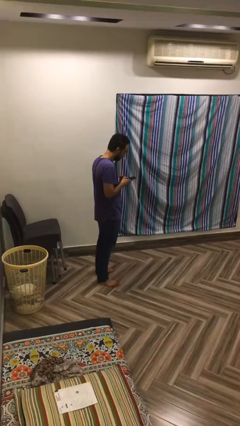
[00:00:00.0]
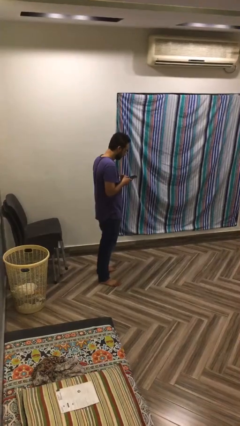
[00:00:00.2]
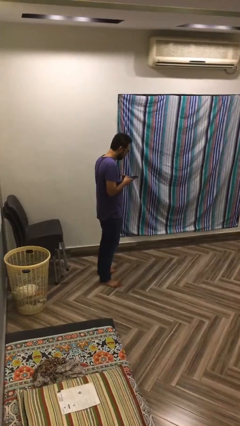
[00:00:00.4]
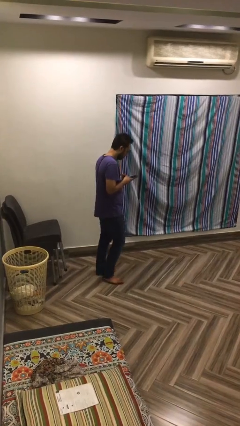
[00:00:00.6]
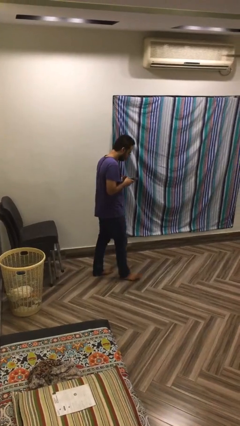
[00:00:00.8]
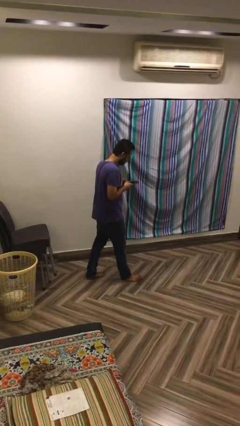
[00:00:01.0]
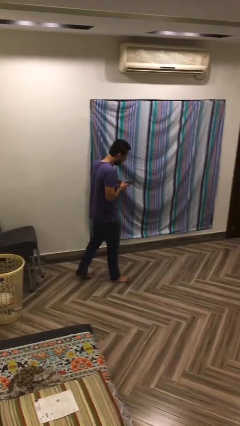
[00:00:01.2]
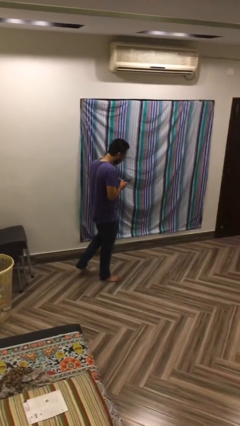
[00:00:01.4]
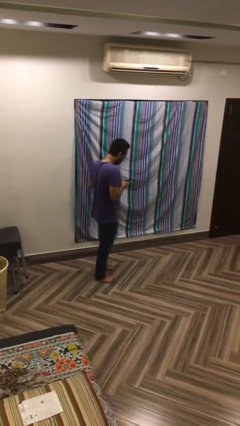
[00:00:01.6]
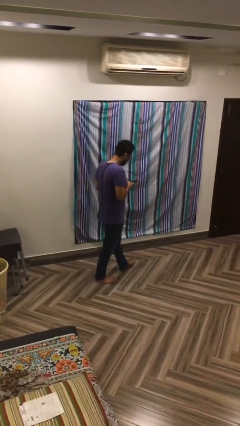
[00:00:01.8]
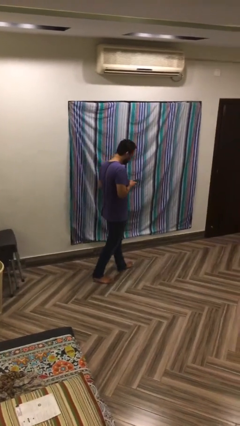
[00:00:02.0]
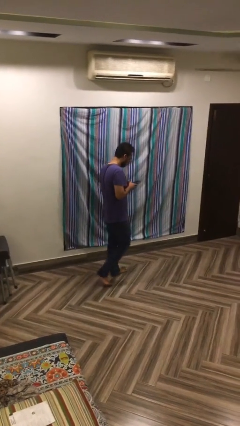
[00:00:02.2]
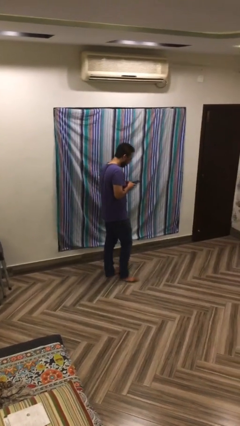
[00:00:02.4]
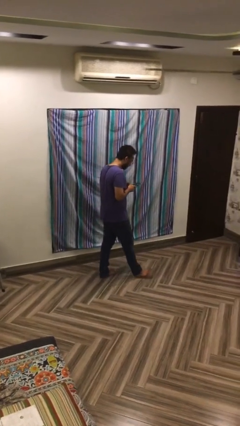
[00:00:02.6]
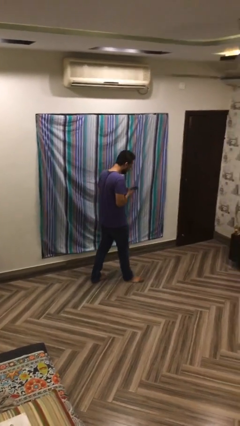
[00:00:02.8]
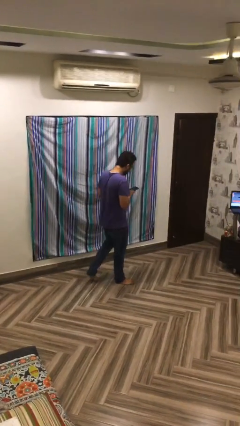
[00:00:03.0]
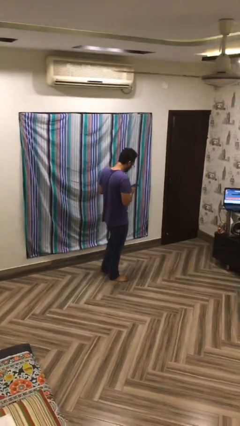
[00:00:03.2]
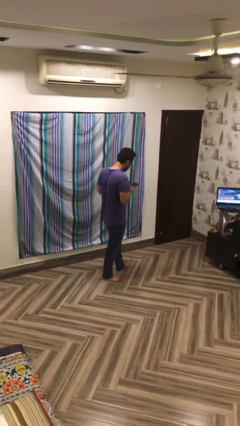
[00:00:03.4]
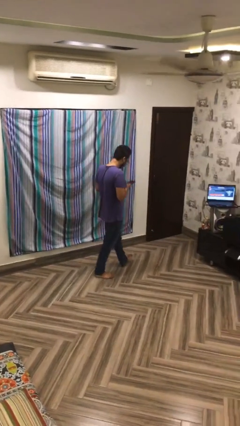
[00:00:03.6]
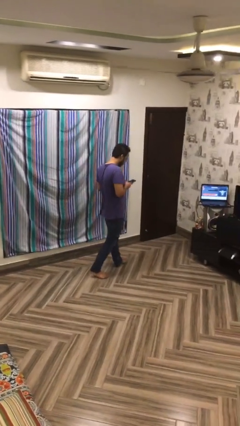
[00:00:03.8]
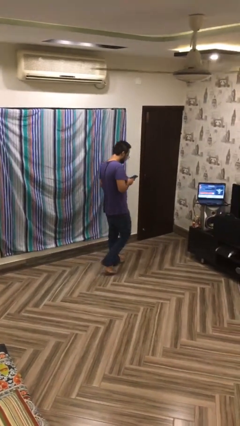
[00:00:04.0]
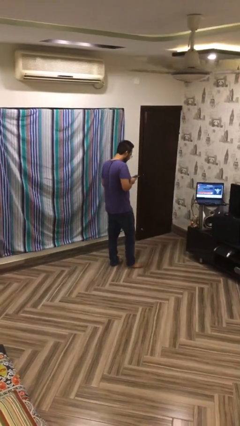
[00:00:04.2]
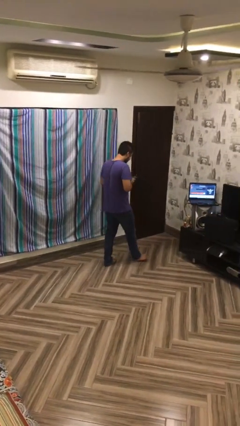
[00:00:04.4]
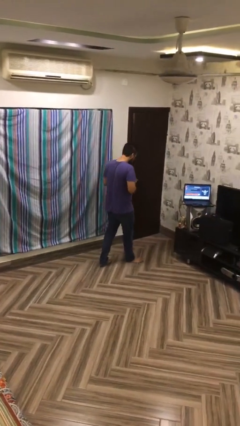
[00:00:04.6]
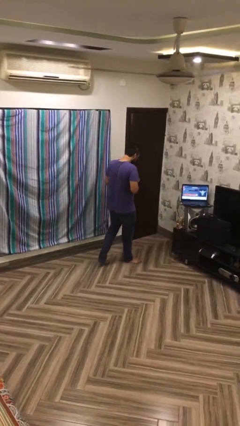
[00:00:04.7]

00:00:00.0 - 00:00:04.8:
person texts on phone

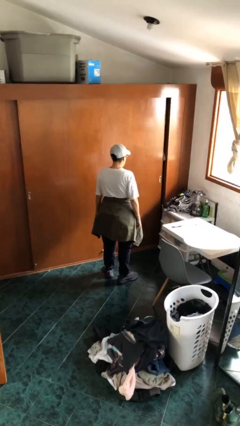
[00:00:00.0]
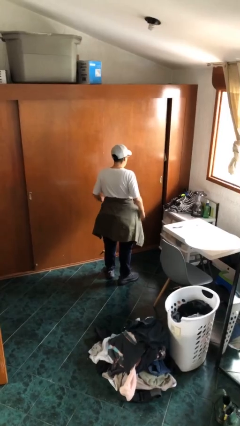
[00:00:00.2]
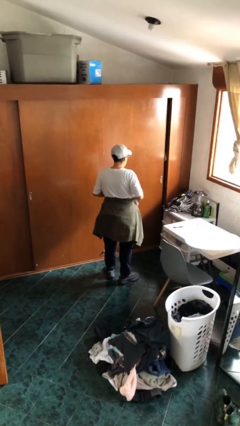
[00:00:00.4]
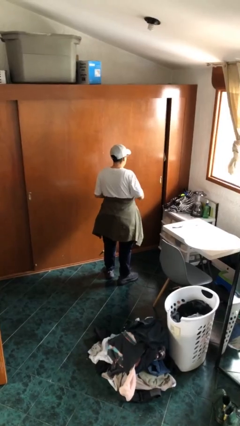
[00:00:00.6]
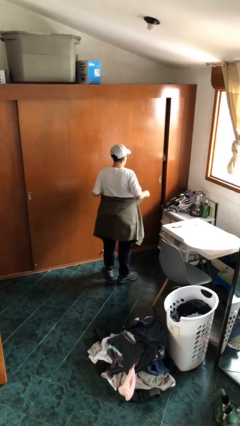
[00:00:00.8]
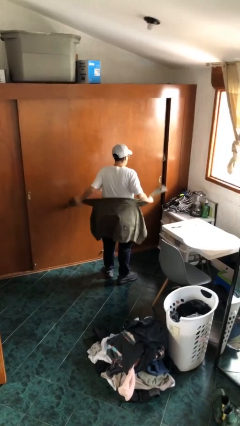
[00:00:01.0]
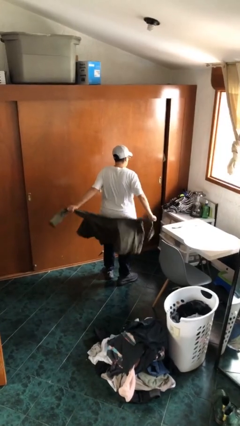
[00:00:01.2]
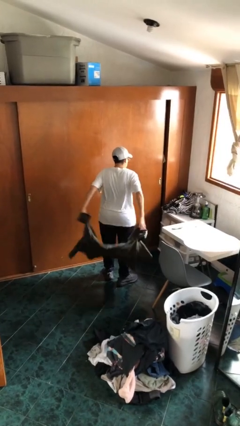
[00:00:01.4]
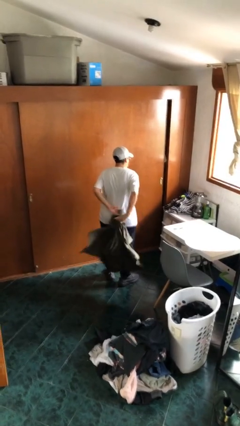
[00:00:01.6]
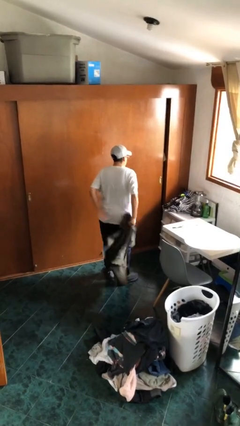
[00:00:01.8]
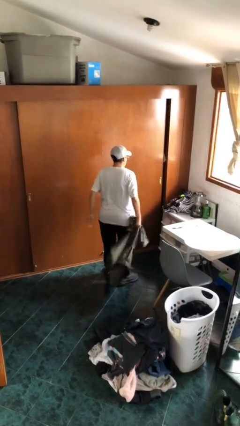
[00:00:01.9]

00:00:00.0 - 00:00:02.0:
person unties jacket around waist

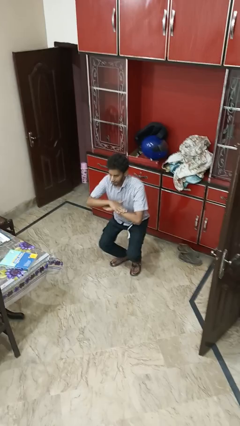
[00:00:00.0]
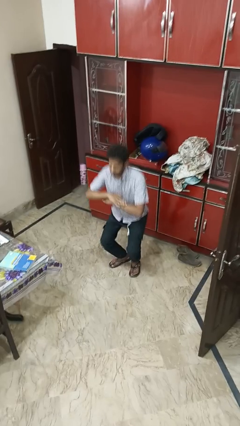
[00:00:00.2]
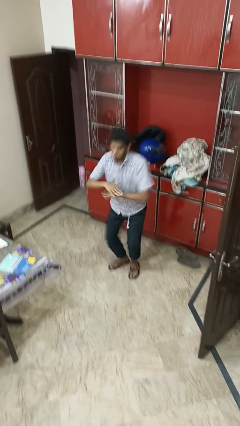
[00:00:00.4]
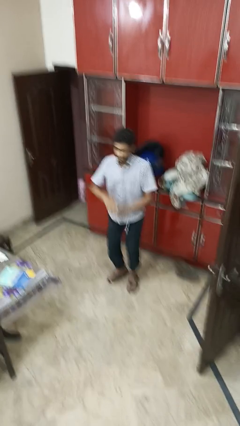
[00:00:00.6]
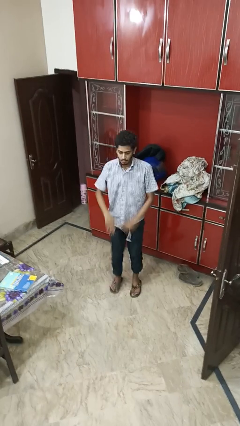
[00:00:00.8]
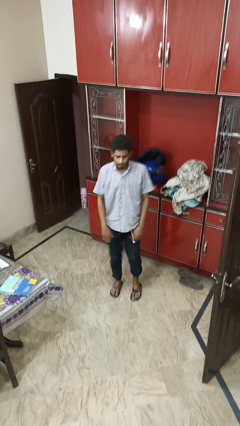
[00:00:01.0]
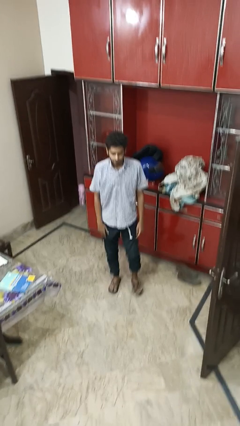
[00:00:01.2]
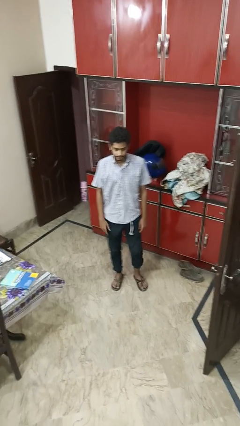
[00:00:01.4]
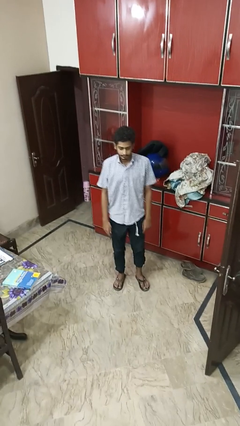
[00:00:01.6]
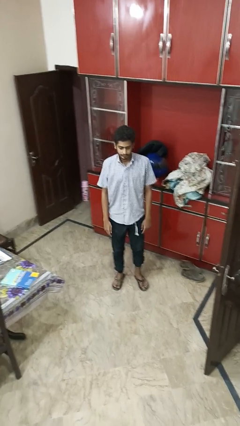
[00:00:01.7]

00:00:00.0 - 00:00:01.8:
person stands up

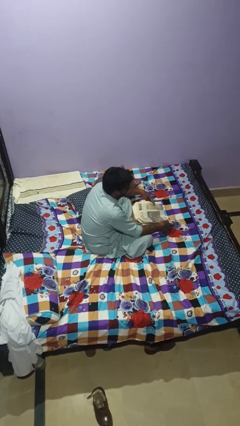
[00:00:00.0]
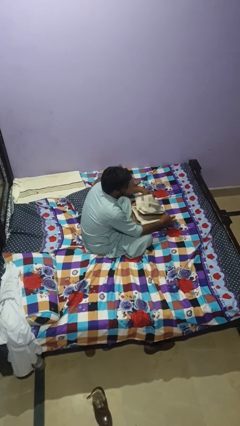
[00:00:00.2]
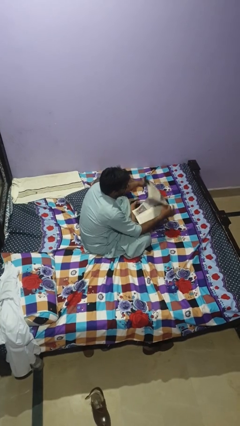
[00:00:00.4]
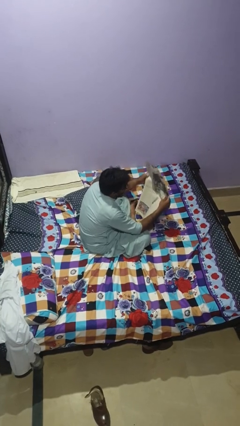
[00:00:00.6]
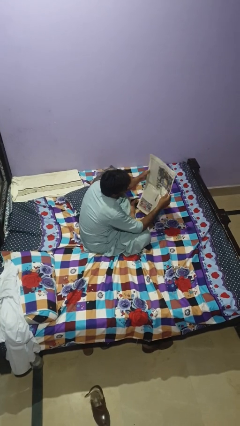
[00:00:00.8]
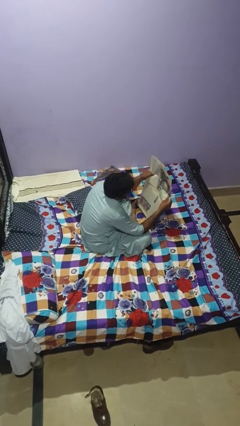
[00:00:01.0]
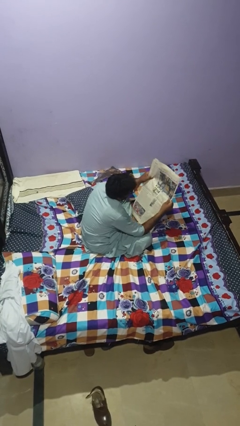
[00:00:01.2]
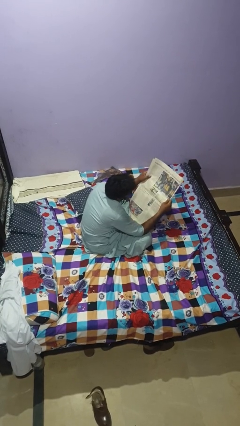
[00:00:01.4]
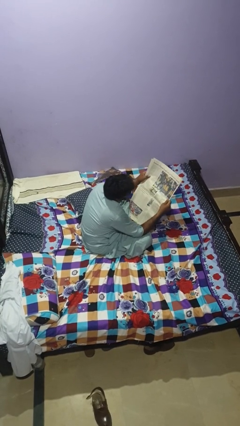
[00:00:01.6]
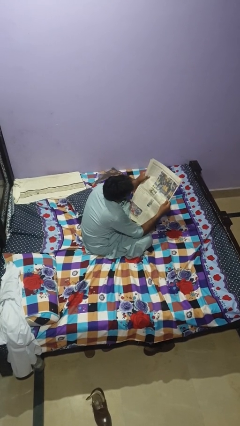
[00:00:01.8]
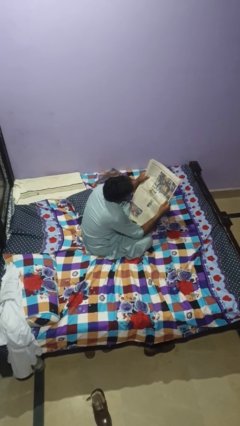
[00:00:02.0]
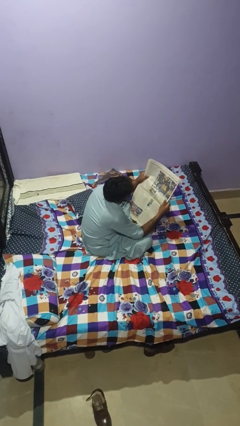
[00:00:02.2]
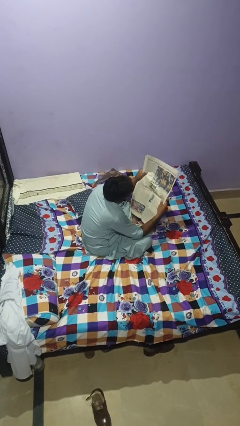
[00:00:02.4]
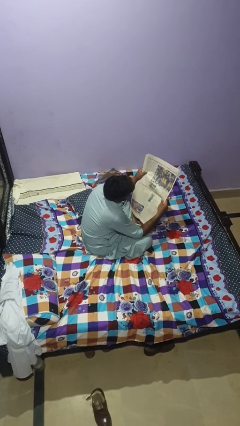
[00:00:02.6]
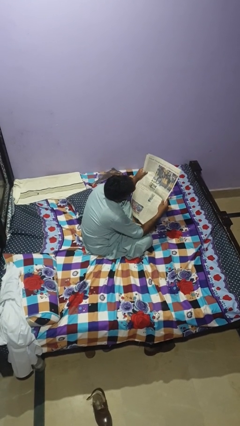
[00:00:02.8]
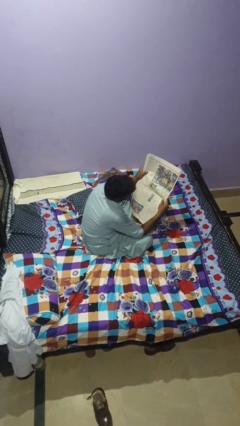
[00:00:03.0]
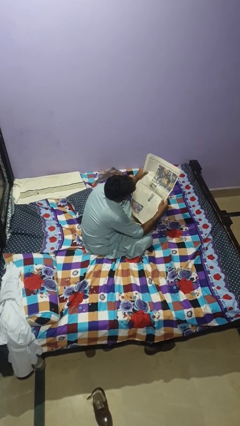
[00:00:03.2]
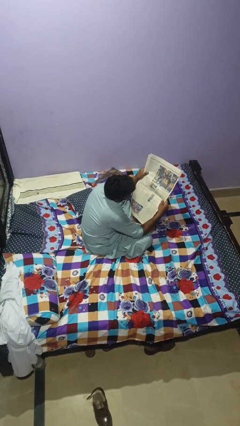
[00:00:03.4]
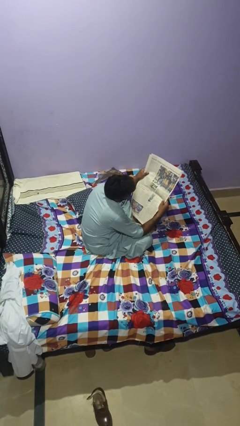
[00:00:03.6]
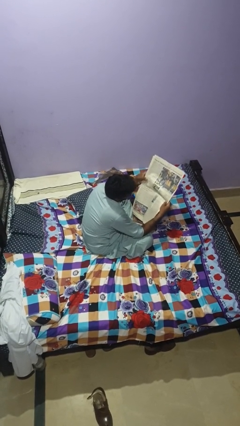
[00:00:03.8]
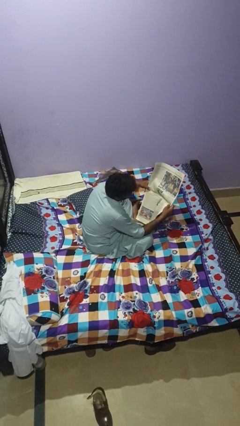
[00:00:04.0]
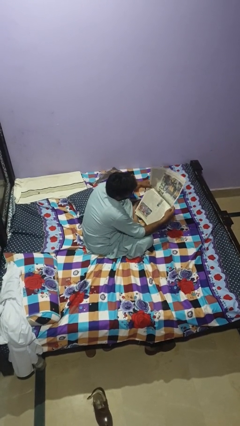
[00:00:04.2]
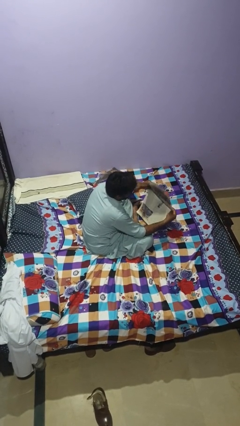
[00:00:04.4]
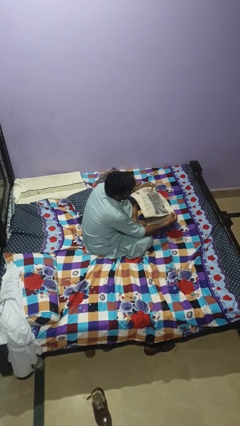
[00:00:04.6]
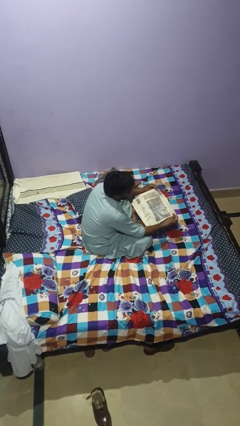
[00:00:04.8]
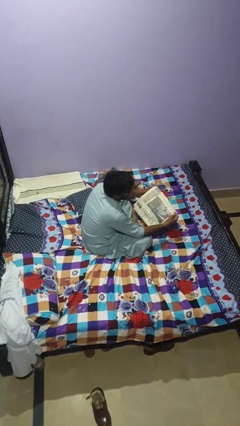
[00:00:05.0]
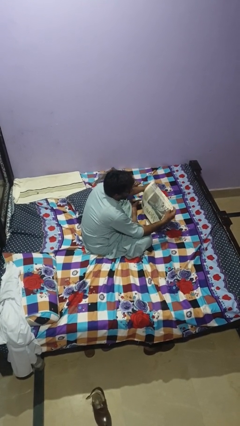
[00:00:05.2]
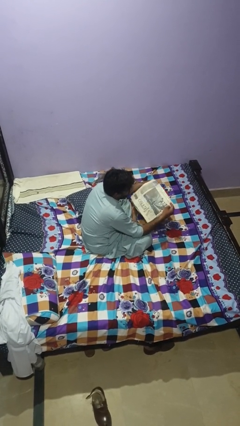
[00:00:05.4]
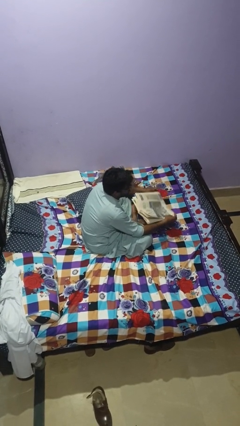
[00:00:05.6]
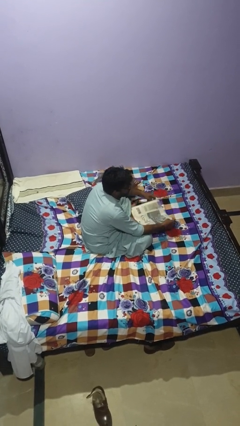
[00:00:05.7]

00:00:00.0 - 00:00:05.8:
person reads newspaper

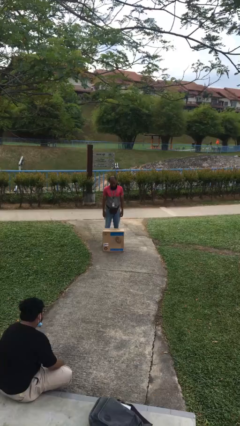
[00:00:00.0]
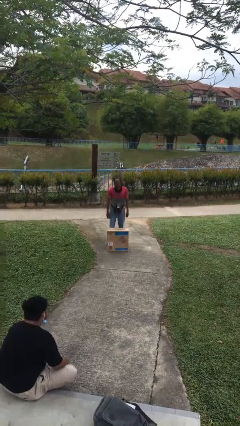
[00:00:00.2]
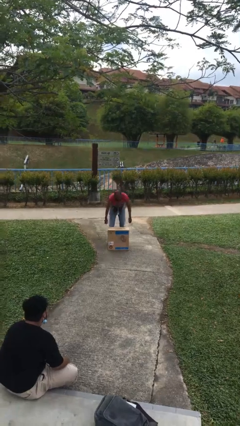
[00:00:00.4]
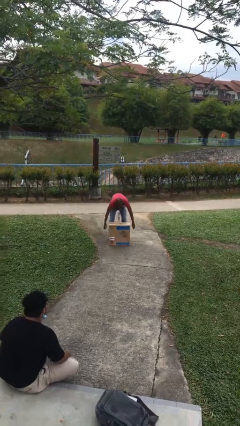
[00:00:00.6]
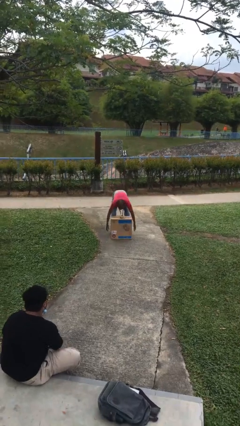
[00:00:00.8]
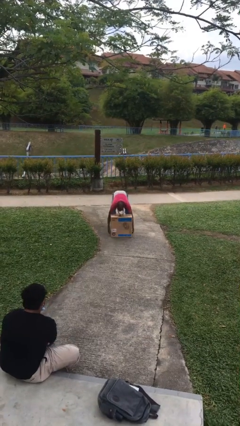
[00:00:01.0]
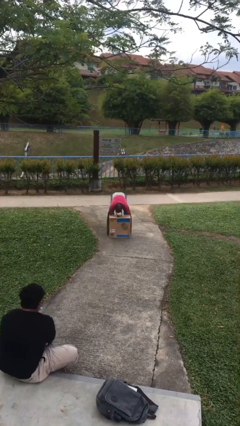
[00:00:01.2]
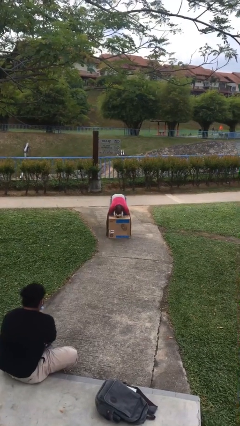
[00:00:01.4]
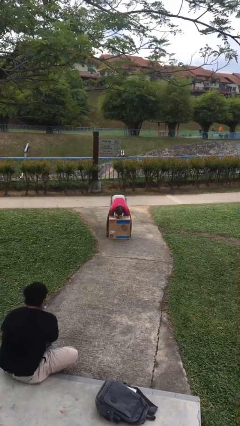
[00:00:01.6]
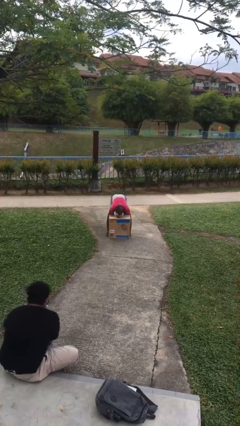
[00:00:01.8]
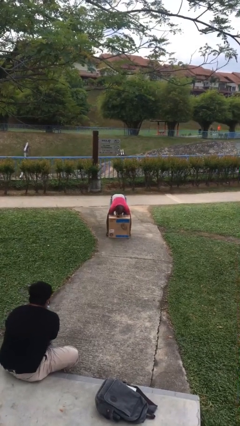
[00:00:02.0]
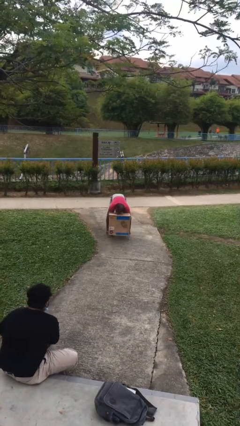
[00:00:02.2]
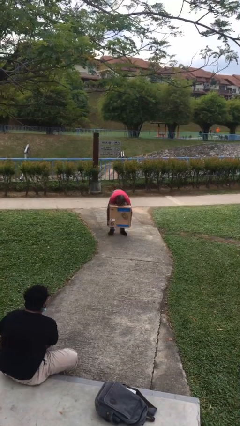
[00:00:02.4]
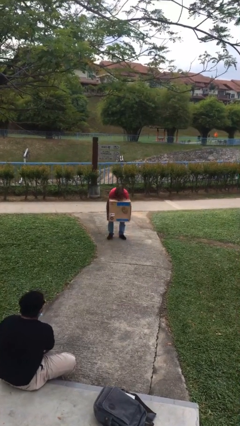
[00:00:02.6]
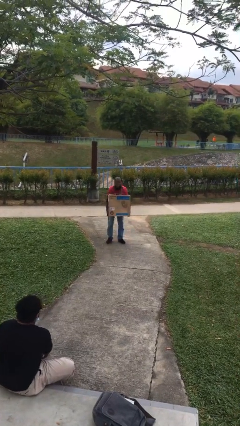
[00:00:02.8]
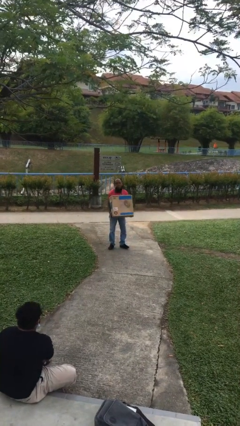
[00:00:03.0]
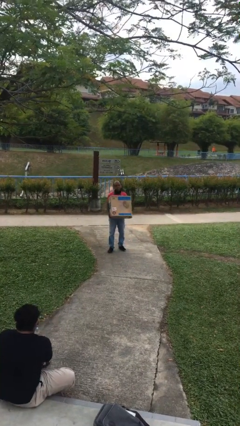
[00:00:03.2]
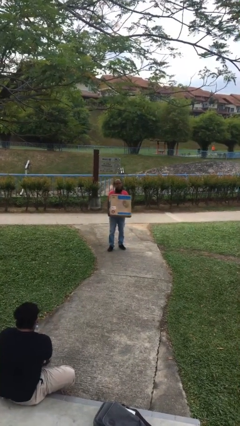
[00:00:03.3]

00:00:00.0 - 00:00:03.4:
person picks up object from floor
